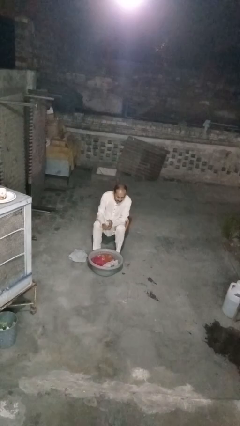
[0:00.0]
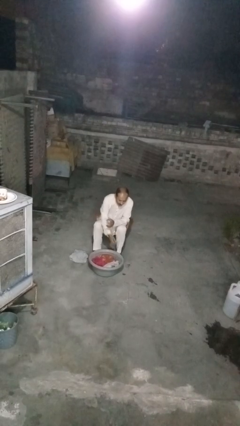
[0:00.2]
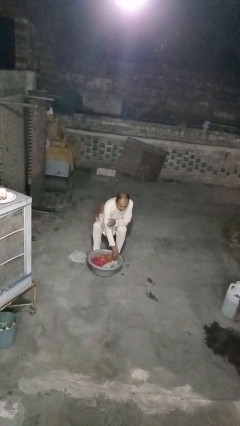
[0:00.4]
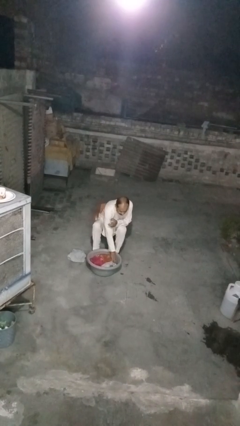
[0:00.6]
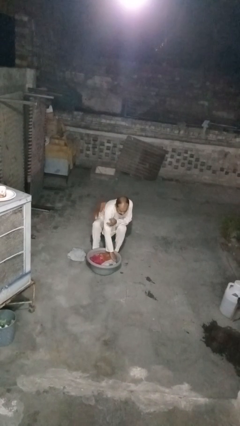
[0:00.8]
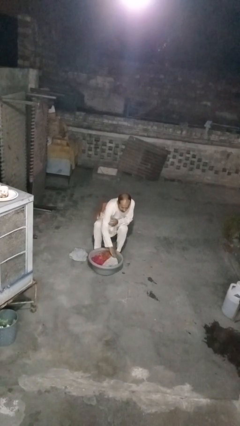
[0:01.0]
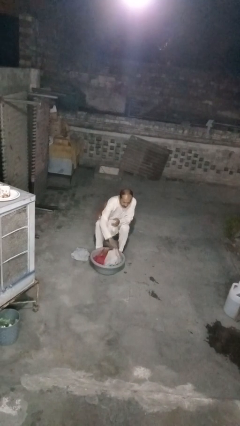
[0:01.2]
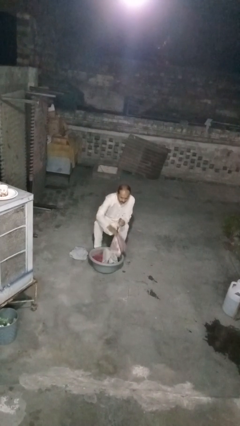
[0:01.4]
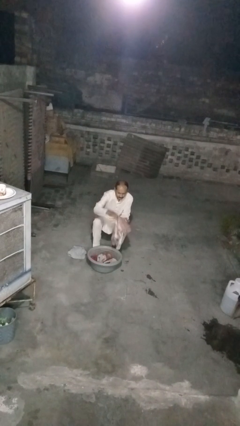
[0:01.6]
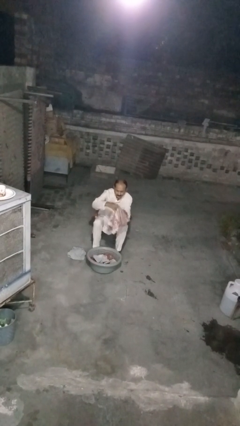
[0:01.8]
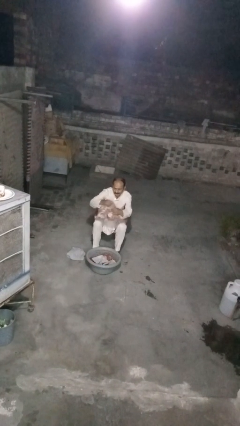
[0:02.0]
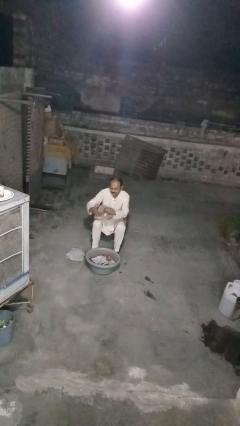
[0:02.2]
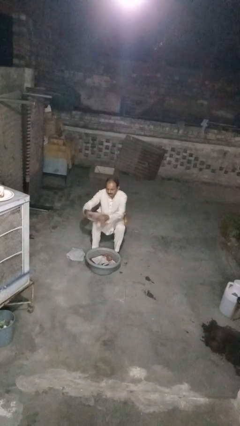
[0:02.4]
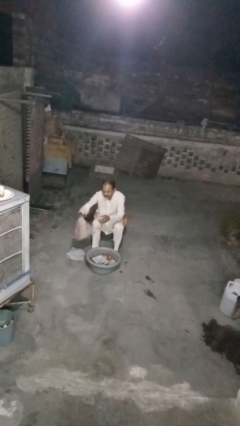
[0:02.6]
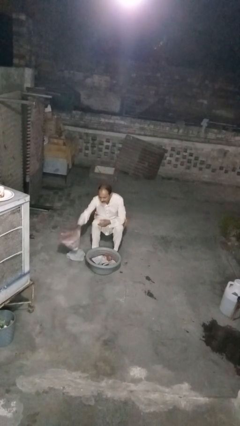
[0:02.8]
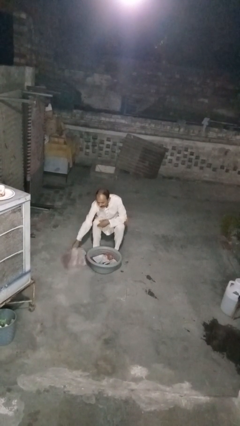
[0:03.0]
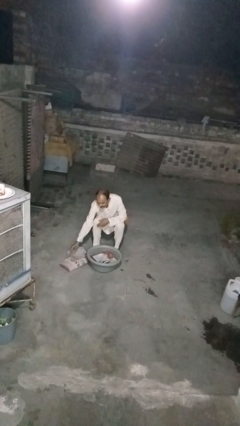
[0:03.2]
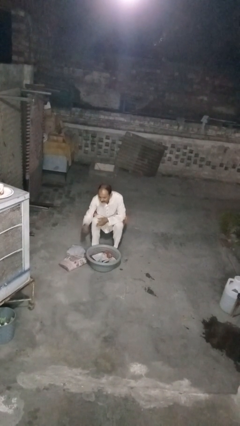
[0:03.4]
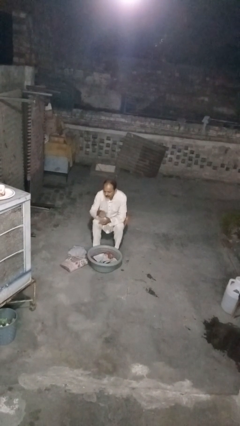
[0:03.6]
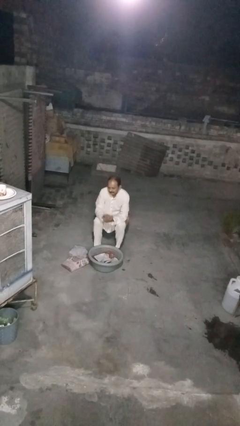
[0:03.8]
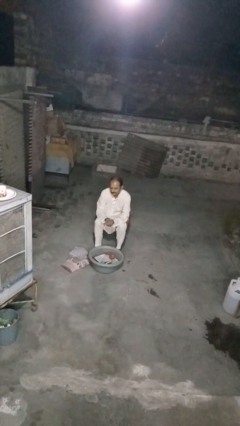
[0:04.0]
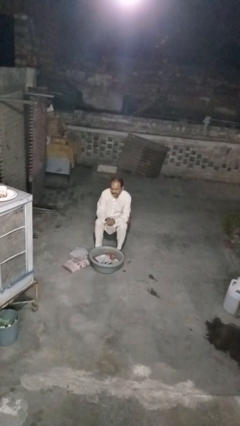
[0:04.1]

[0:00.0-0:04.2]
person takes object from basket

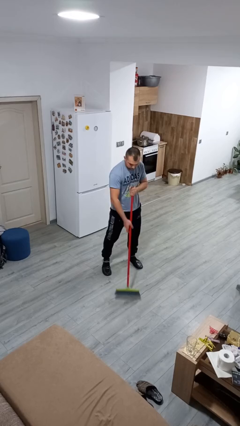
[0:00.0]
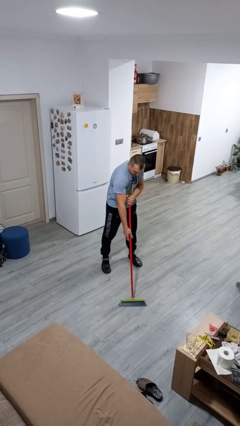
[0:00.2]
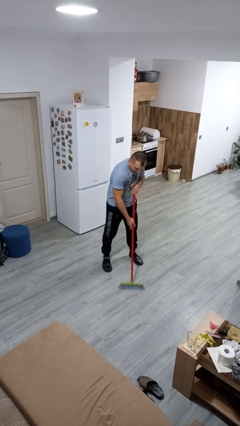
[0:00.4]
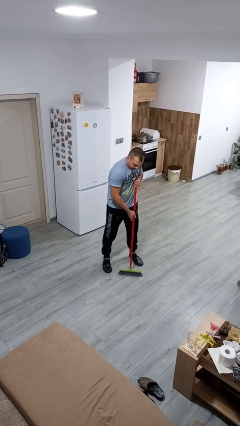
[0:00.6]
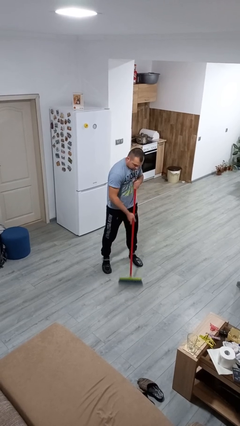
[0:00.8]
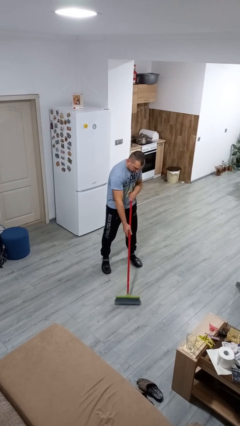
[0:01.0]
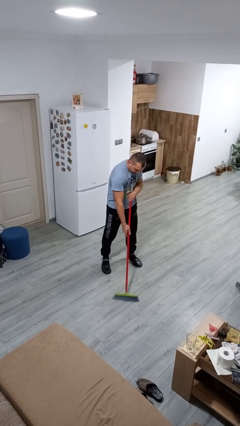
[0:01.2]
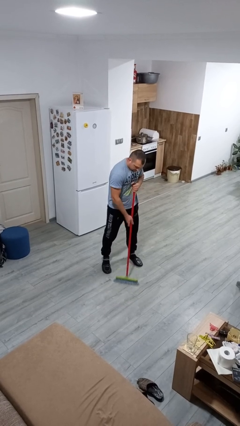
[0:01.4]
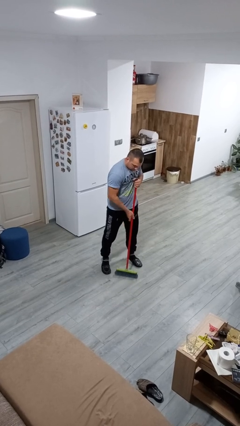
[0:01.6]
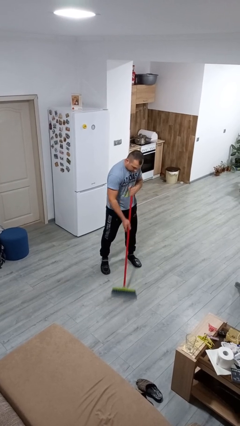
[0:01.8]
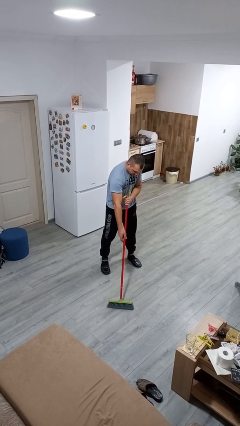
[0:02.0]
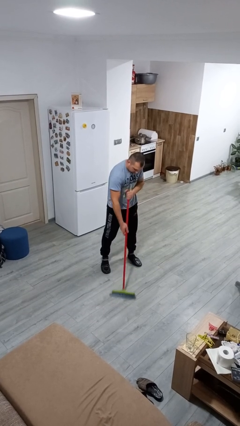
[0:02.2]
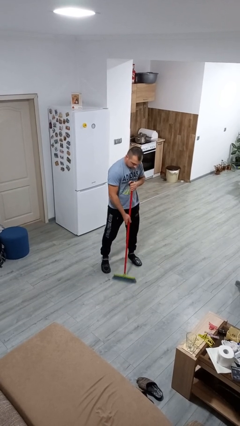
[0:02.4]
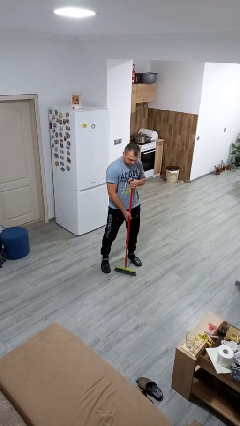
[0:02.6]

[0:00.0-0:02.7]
person sweeps floor

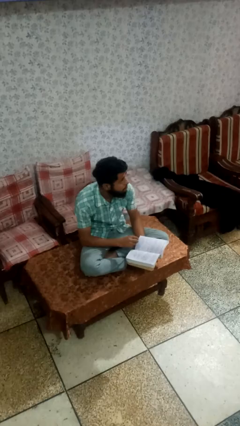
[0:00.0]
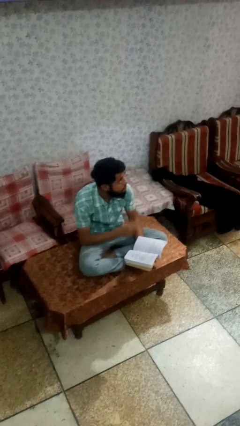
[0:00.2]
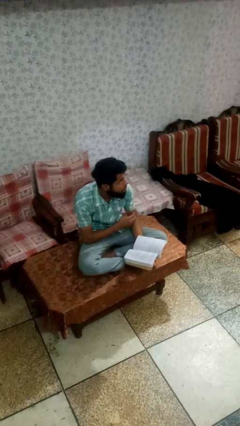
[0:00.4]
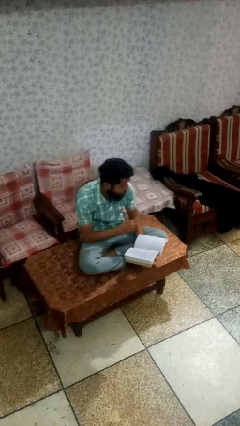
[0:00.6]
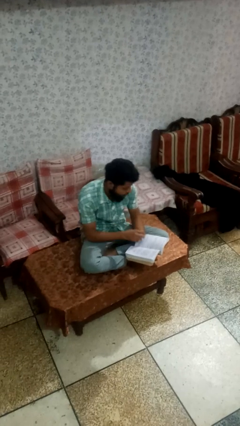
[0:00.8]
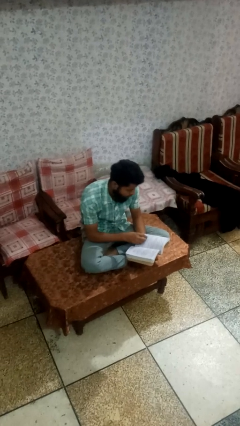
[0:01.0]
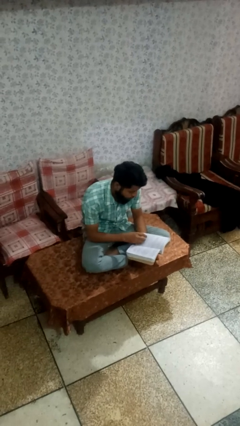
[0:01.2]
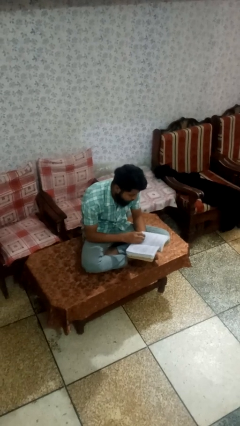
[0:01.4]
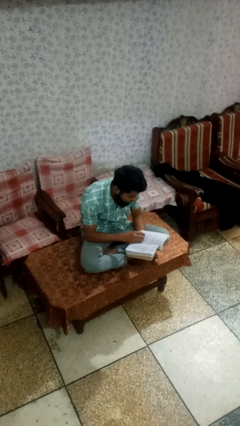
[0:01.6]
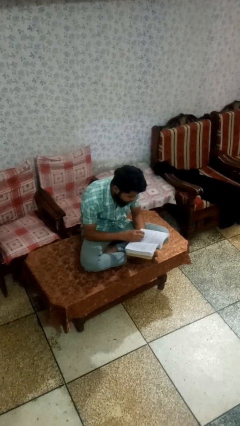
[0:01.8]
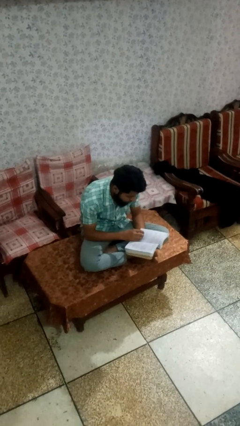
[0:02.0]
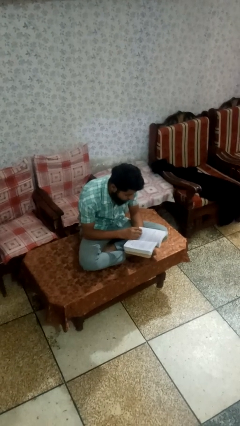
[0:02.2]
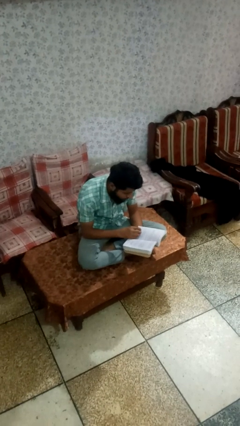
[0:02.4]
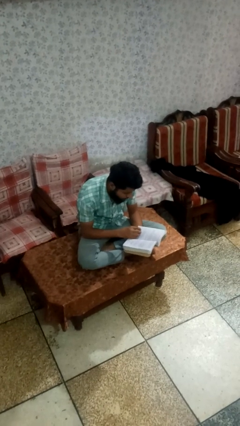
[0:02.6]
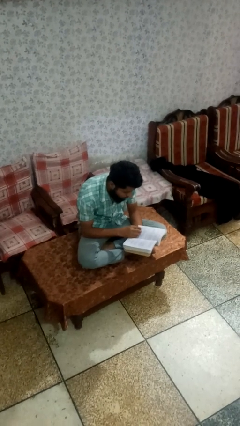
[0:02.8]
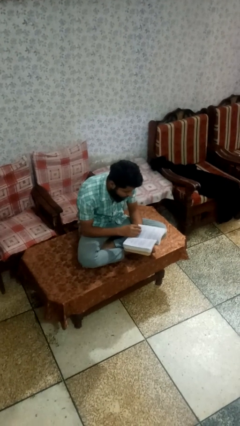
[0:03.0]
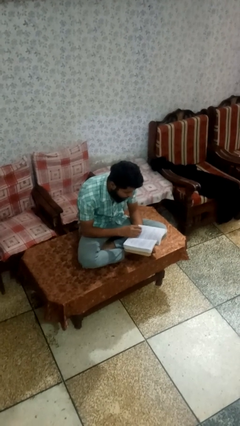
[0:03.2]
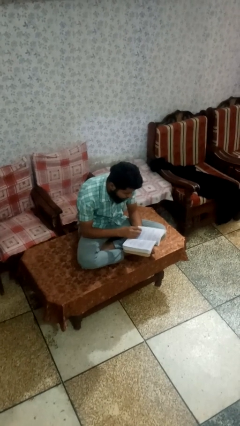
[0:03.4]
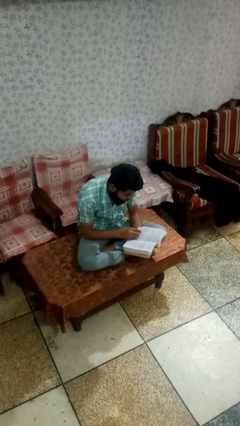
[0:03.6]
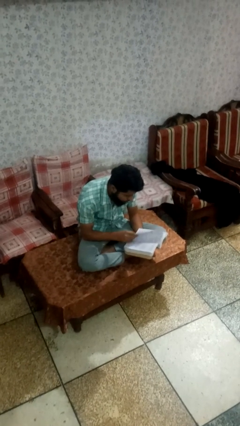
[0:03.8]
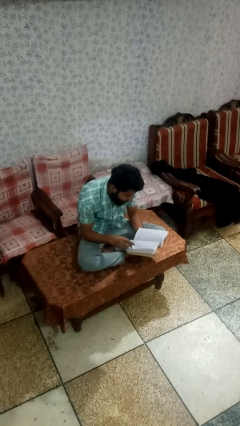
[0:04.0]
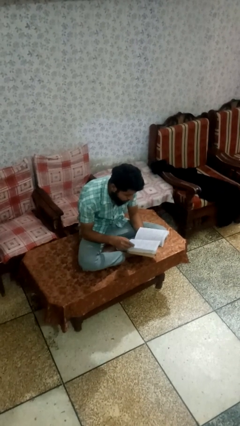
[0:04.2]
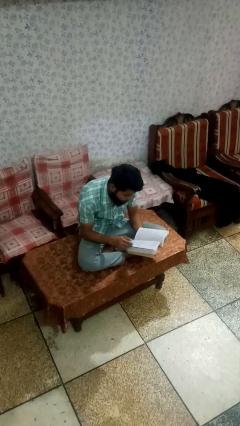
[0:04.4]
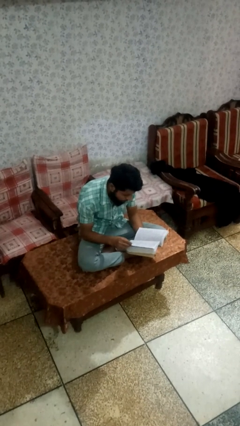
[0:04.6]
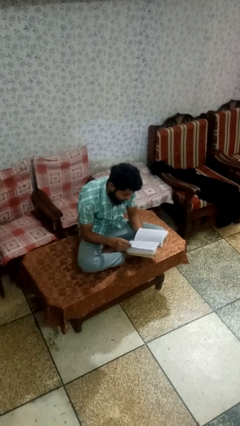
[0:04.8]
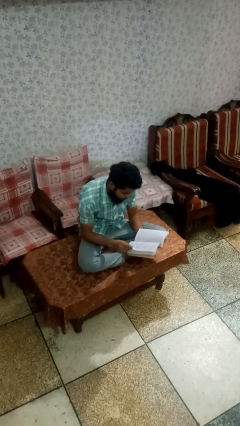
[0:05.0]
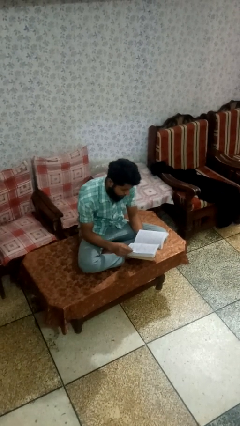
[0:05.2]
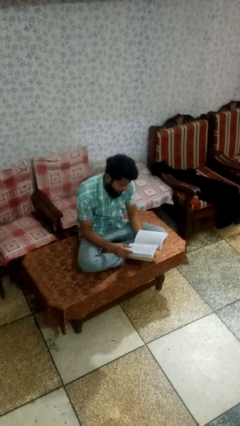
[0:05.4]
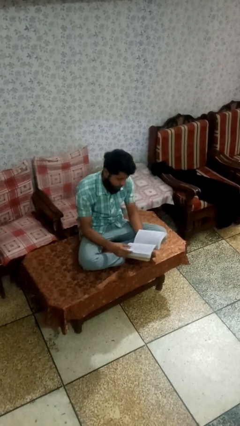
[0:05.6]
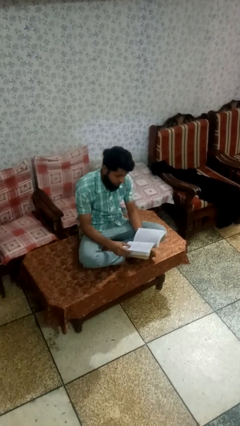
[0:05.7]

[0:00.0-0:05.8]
person reads book

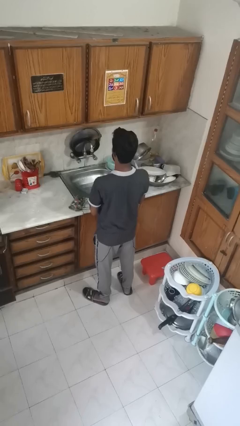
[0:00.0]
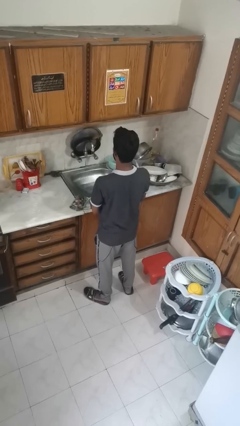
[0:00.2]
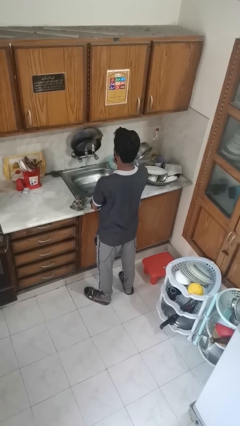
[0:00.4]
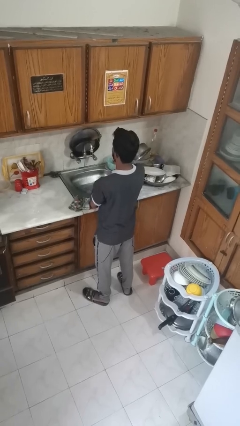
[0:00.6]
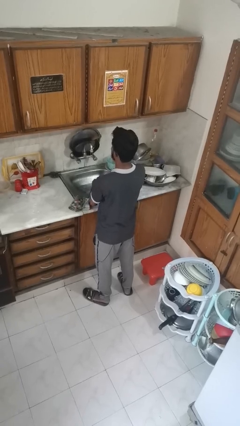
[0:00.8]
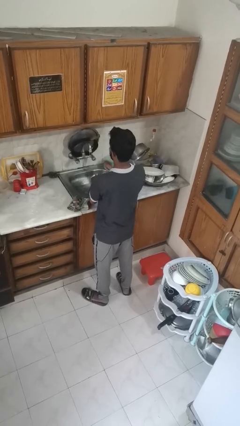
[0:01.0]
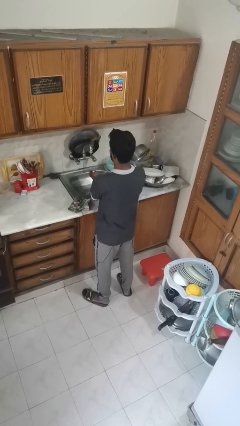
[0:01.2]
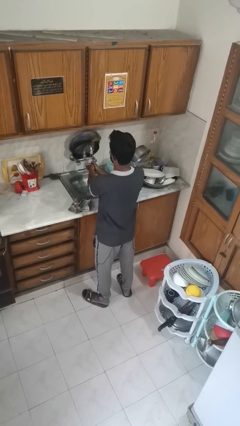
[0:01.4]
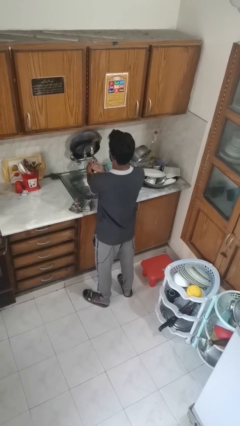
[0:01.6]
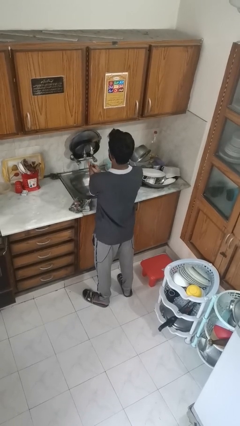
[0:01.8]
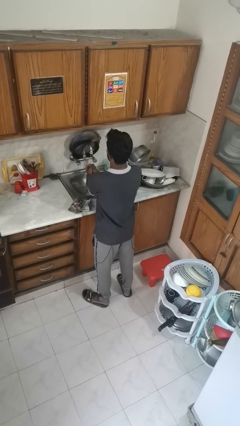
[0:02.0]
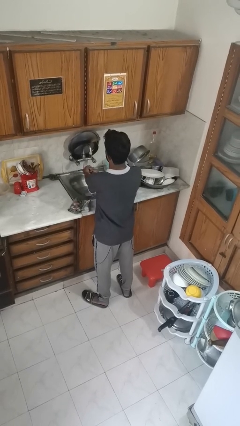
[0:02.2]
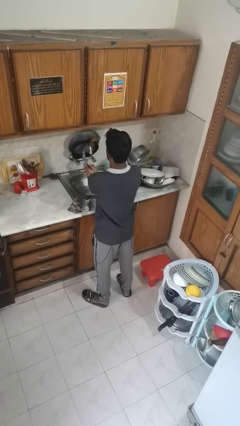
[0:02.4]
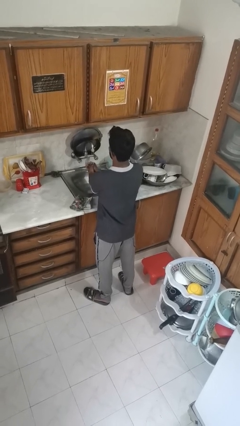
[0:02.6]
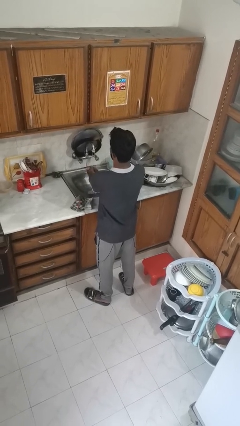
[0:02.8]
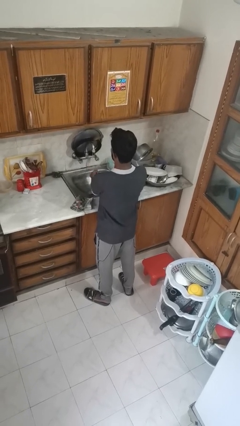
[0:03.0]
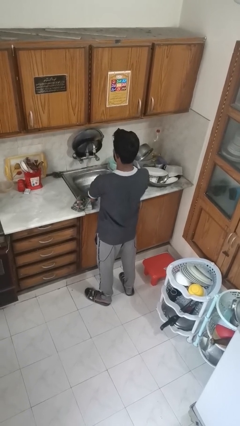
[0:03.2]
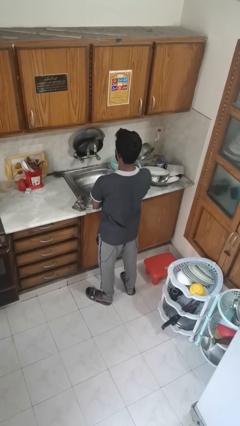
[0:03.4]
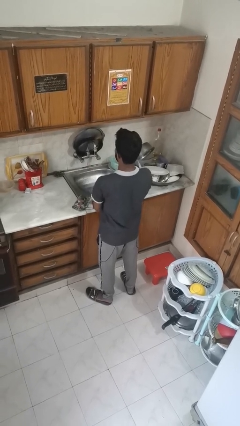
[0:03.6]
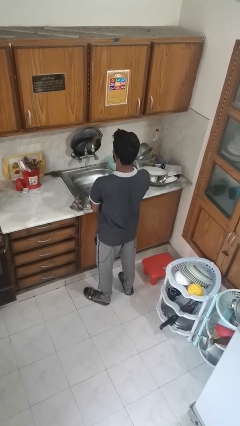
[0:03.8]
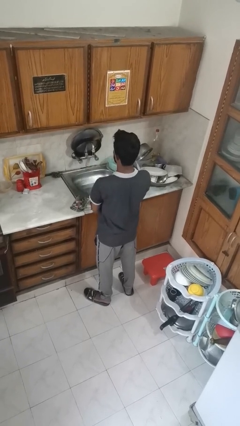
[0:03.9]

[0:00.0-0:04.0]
person washes hands

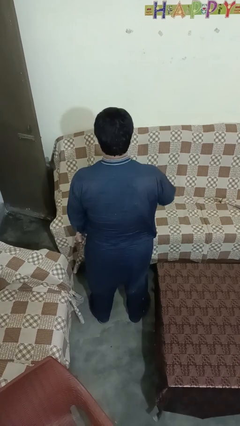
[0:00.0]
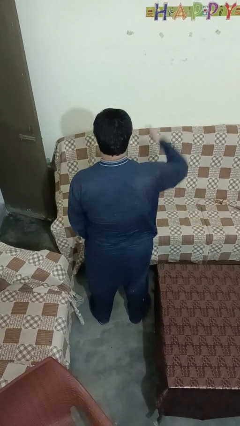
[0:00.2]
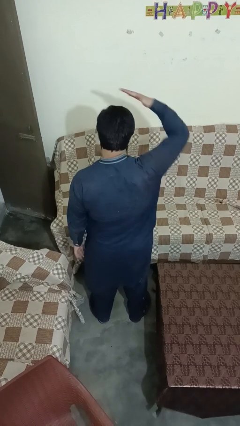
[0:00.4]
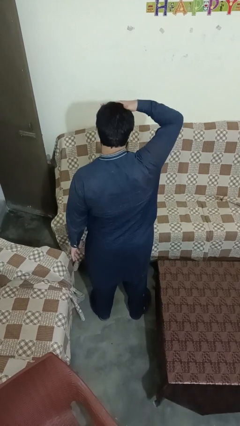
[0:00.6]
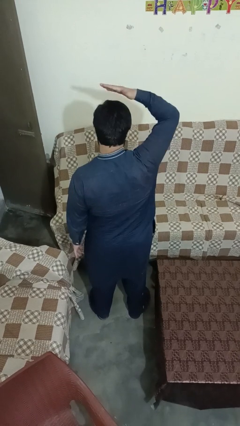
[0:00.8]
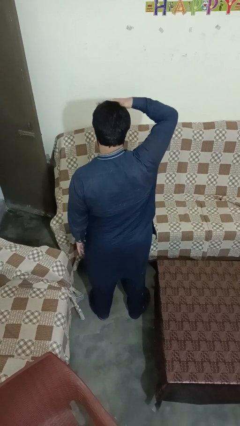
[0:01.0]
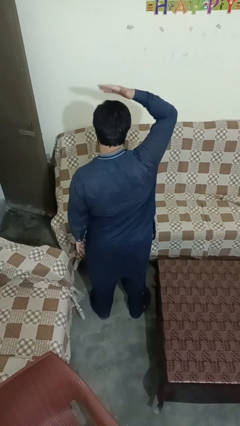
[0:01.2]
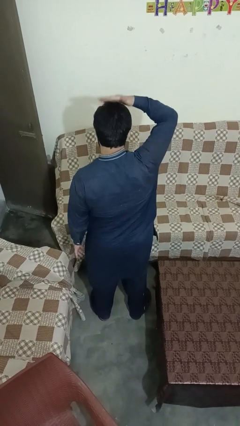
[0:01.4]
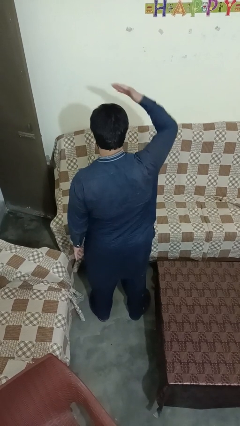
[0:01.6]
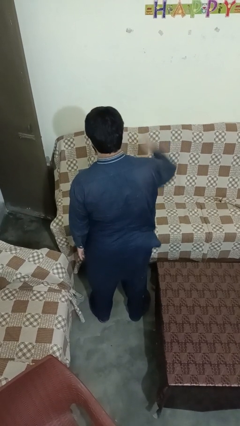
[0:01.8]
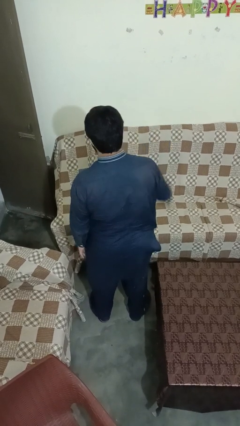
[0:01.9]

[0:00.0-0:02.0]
person pats head
